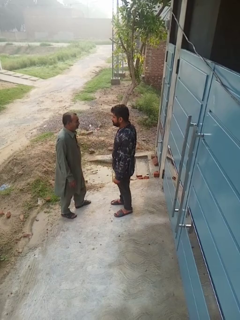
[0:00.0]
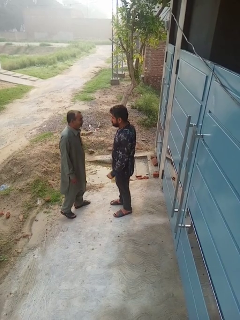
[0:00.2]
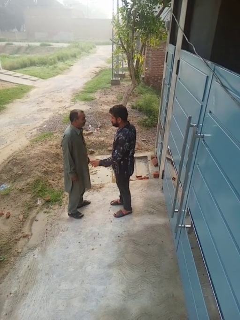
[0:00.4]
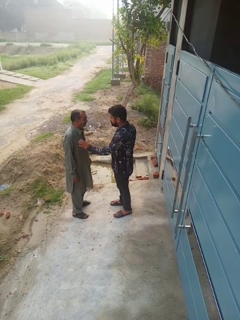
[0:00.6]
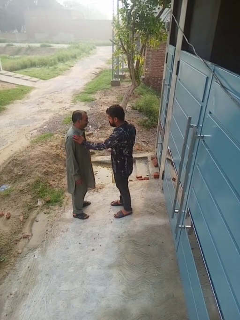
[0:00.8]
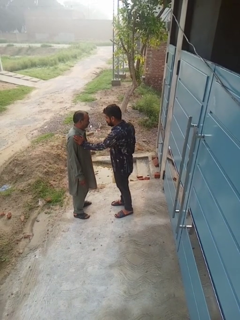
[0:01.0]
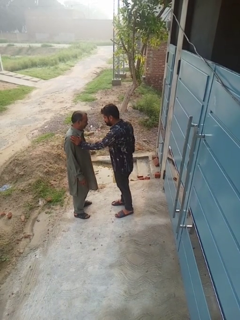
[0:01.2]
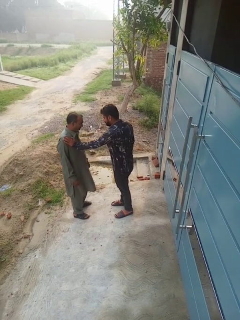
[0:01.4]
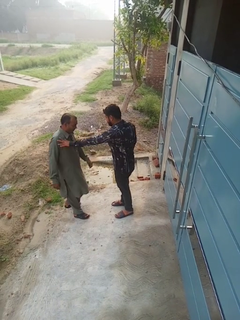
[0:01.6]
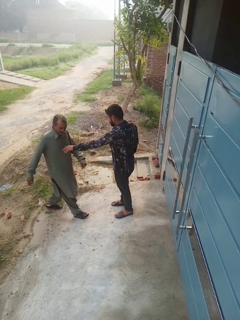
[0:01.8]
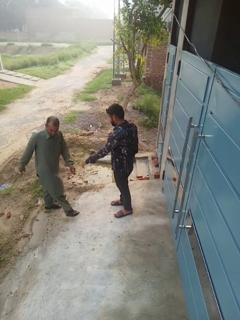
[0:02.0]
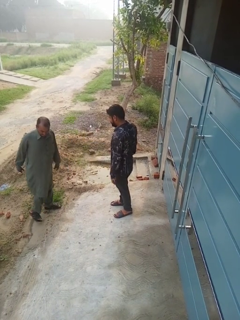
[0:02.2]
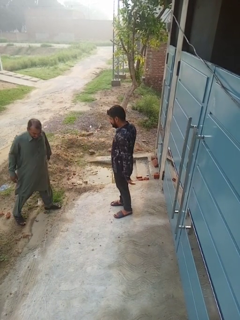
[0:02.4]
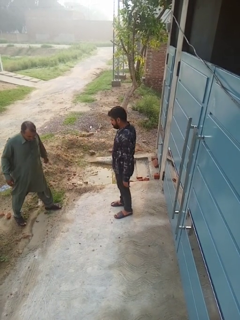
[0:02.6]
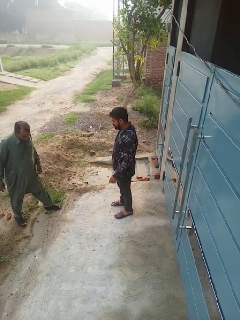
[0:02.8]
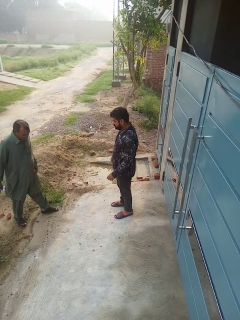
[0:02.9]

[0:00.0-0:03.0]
person shoves person

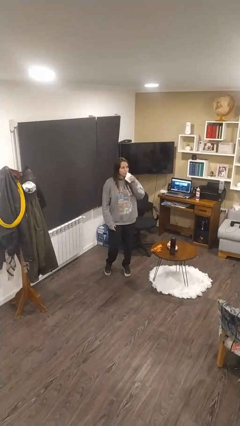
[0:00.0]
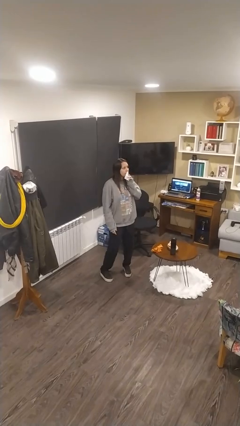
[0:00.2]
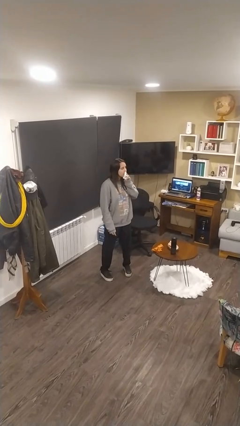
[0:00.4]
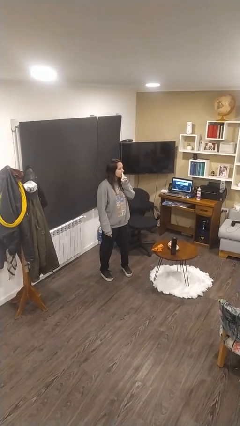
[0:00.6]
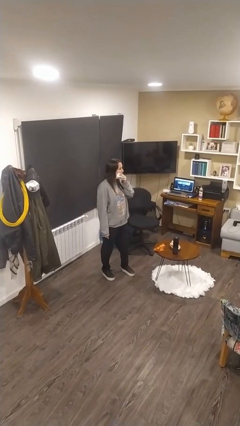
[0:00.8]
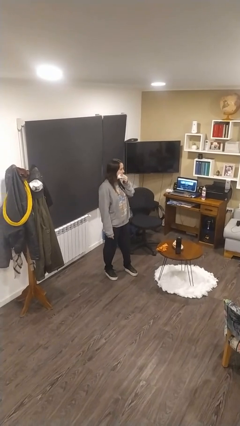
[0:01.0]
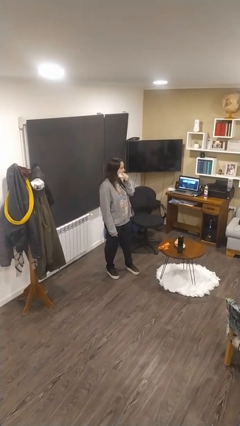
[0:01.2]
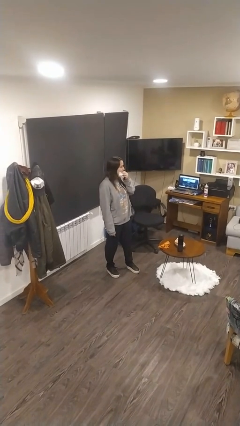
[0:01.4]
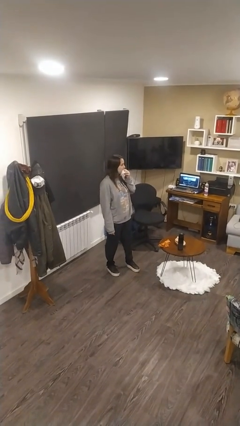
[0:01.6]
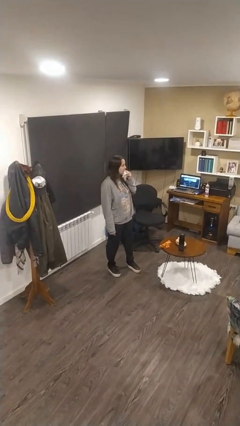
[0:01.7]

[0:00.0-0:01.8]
person wipes mouth with napkin

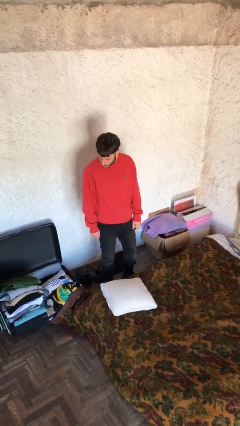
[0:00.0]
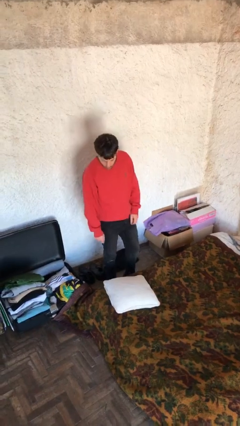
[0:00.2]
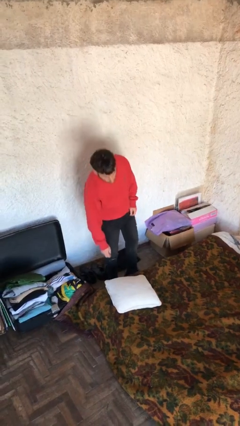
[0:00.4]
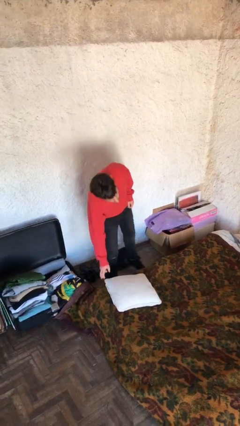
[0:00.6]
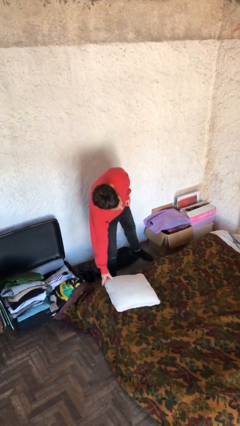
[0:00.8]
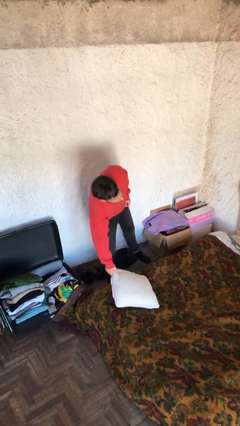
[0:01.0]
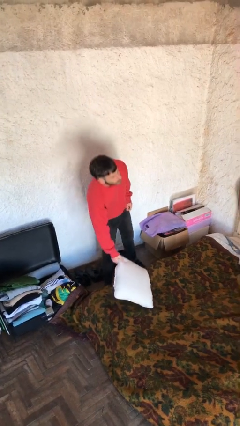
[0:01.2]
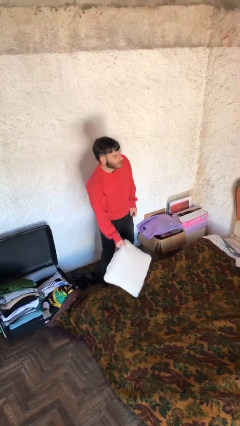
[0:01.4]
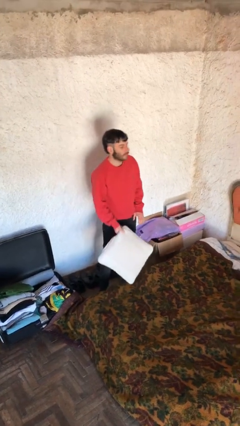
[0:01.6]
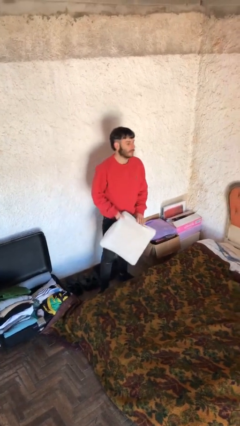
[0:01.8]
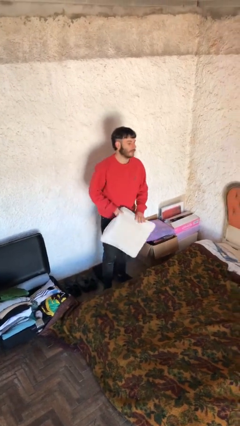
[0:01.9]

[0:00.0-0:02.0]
person picks up object from bed

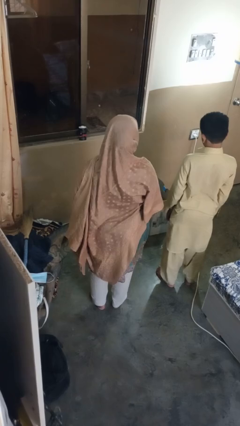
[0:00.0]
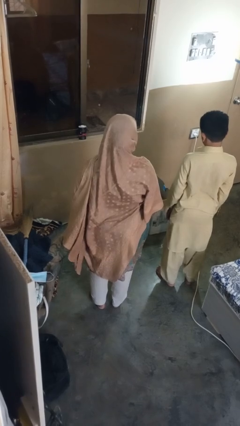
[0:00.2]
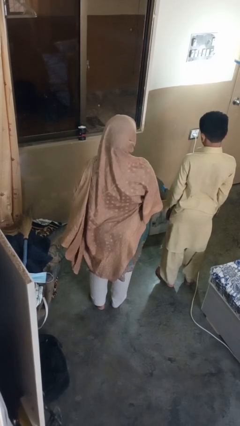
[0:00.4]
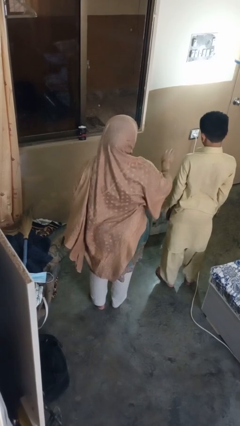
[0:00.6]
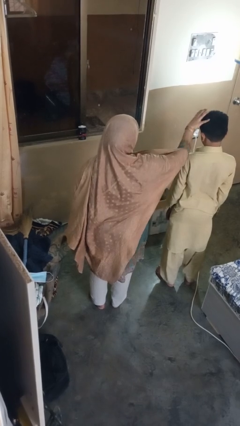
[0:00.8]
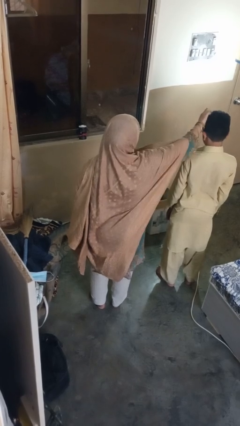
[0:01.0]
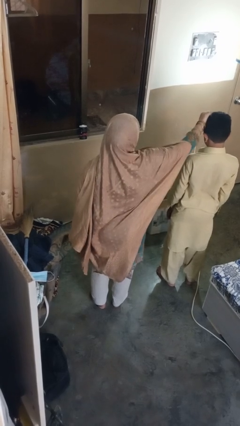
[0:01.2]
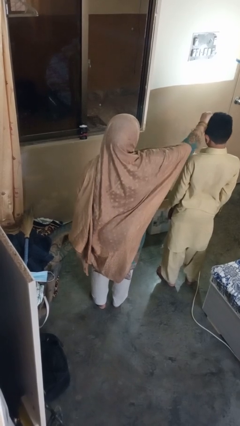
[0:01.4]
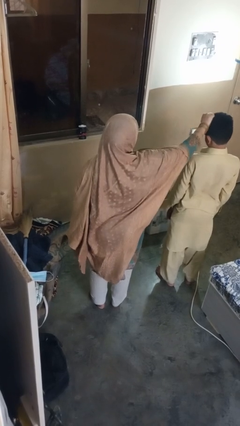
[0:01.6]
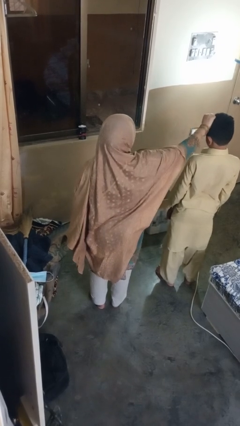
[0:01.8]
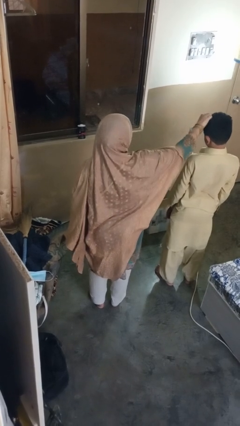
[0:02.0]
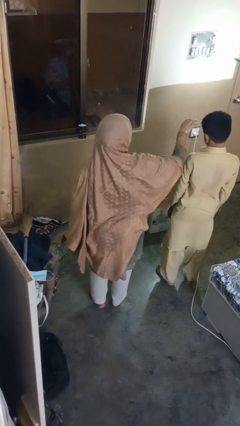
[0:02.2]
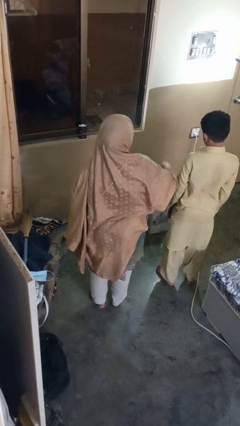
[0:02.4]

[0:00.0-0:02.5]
person grabs person by hair

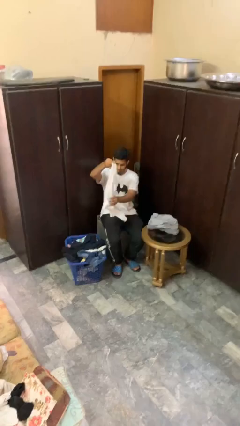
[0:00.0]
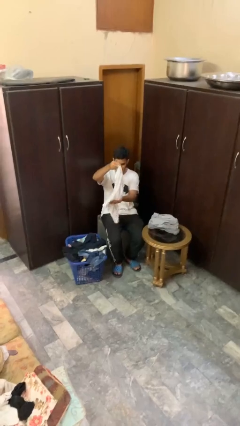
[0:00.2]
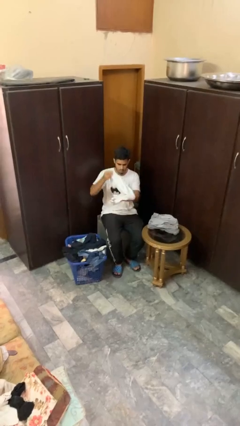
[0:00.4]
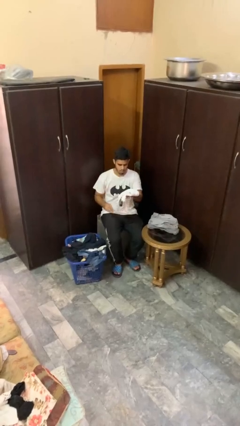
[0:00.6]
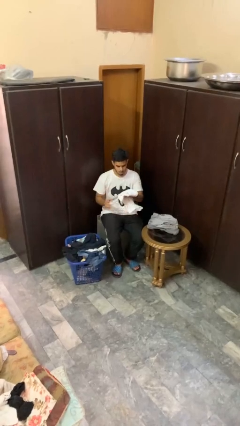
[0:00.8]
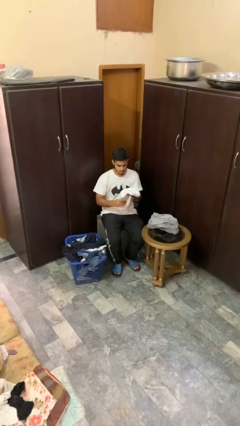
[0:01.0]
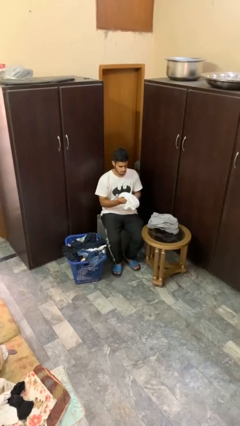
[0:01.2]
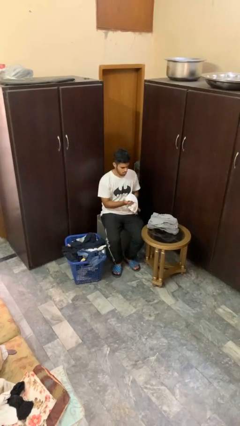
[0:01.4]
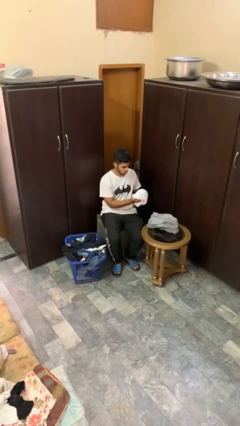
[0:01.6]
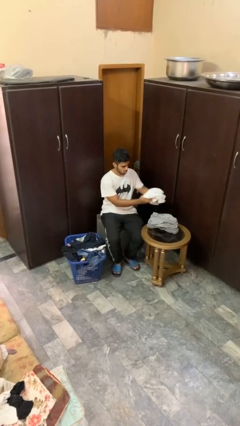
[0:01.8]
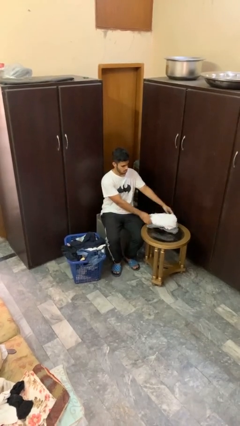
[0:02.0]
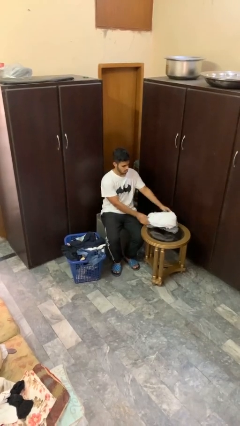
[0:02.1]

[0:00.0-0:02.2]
person folds shirt

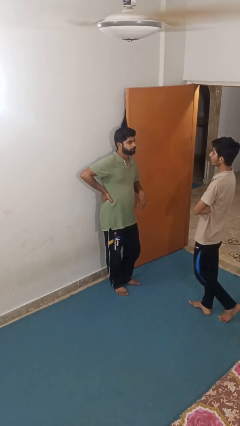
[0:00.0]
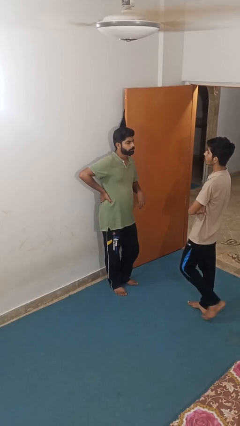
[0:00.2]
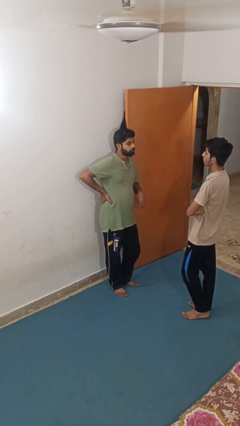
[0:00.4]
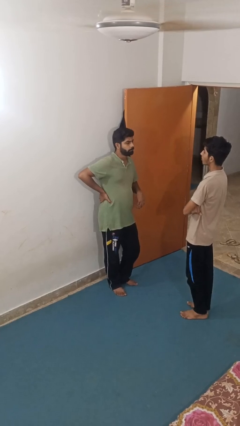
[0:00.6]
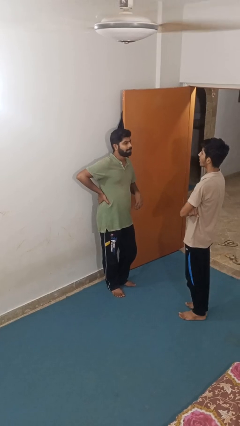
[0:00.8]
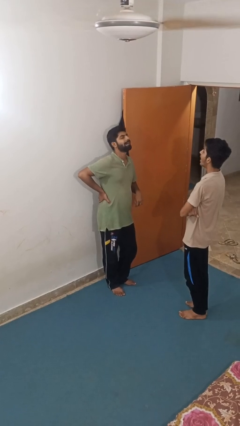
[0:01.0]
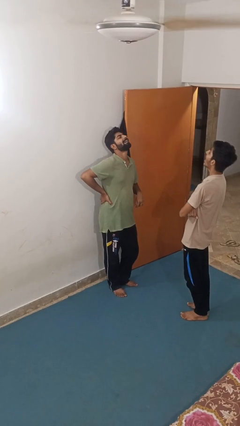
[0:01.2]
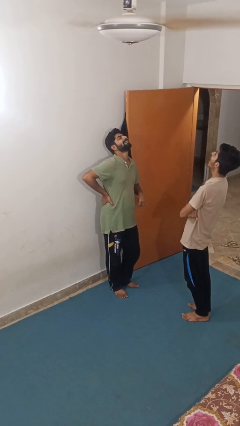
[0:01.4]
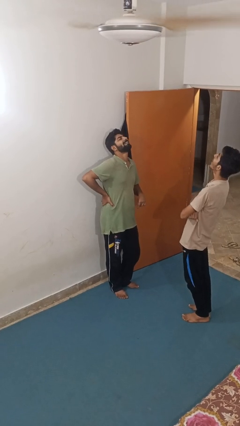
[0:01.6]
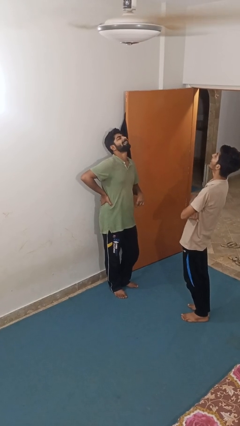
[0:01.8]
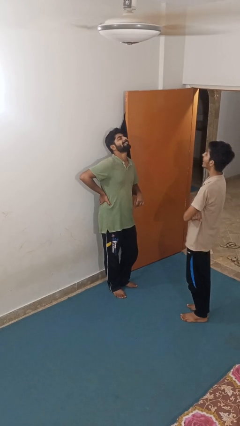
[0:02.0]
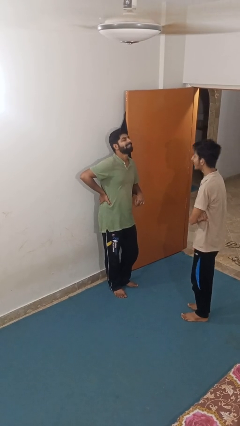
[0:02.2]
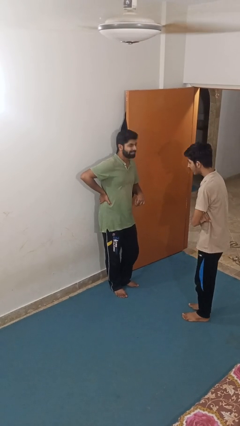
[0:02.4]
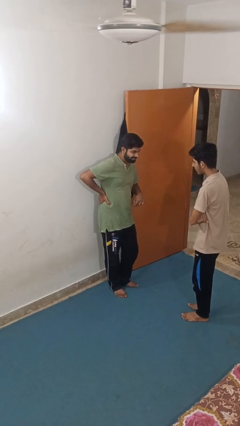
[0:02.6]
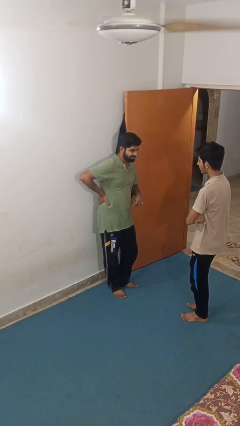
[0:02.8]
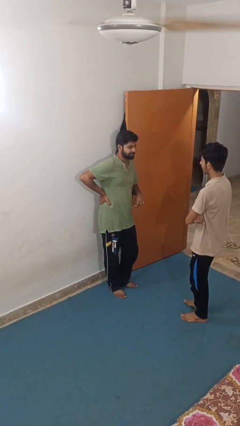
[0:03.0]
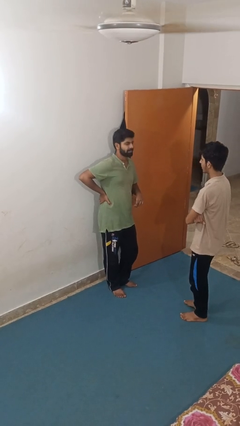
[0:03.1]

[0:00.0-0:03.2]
person laughs with person

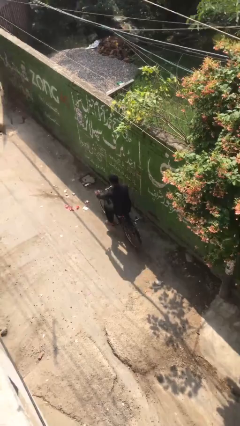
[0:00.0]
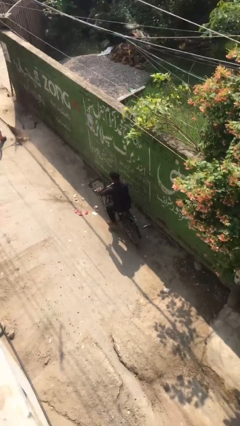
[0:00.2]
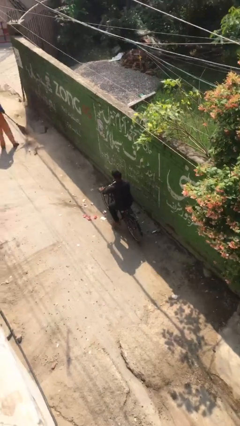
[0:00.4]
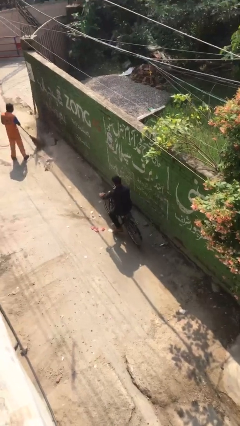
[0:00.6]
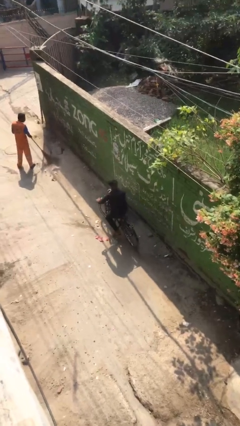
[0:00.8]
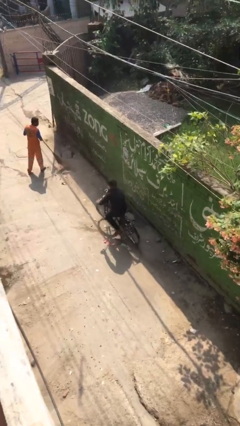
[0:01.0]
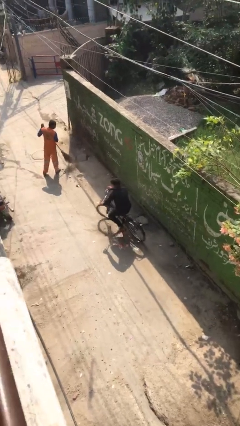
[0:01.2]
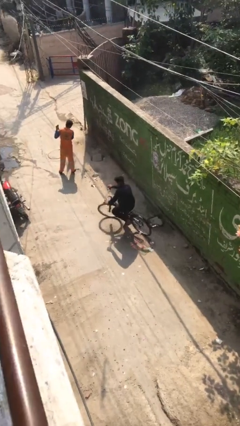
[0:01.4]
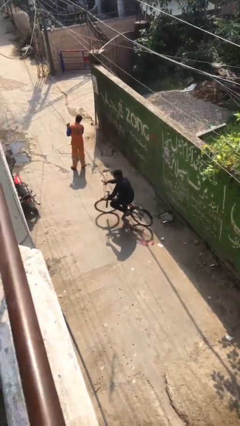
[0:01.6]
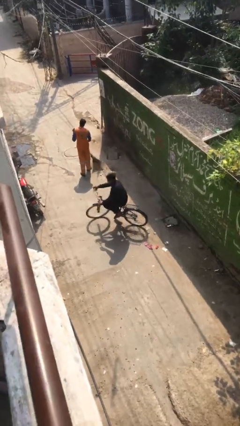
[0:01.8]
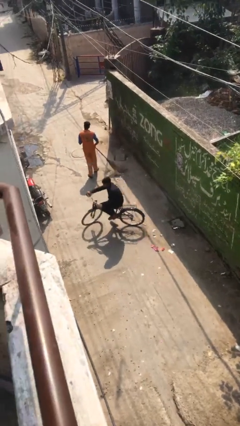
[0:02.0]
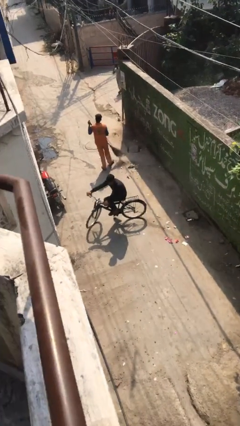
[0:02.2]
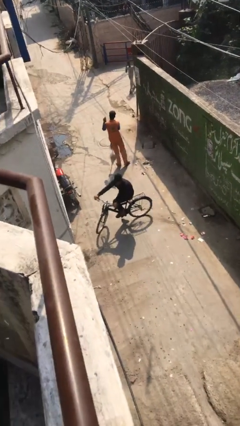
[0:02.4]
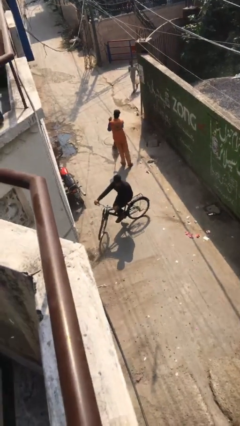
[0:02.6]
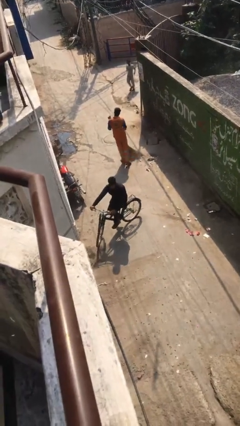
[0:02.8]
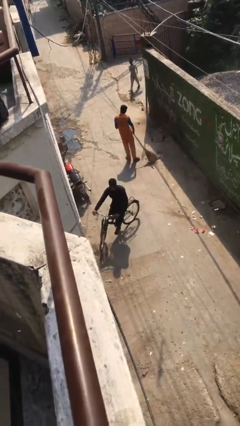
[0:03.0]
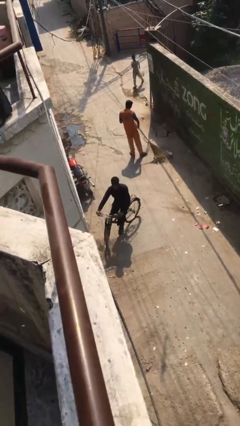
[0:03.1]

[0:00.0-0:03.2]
person rides bicycle

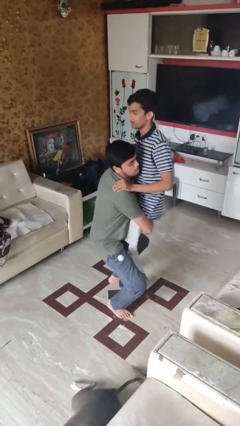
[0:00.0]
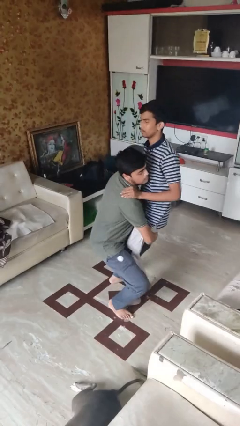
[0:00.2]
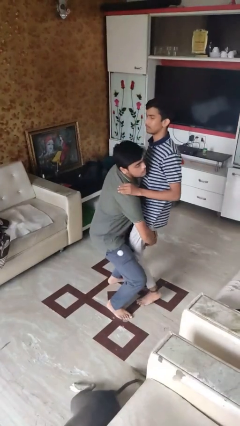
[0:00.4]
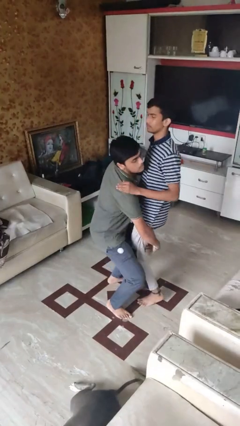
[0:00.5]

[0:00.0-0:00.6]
person puts down person
